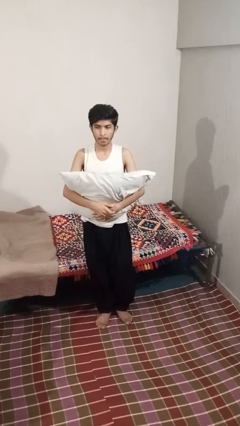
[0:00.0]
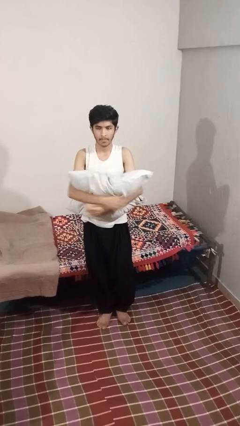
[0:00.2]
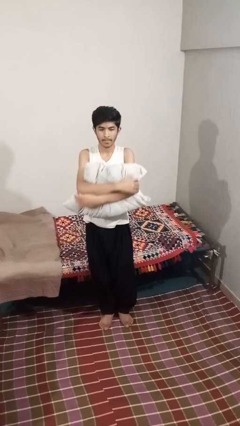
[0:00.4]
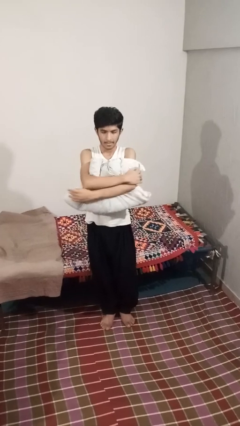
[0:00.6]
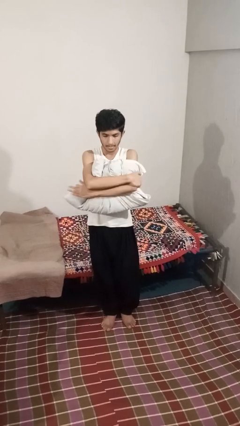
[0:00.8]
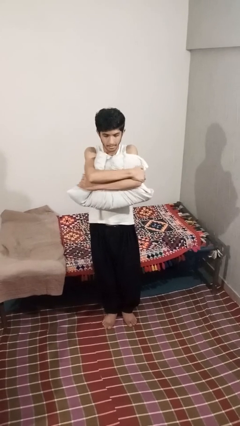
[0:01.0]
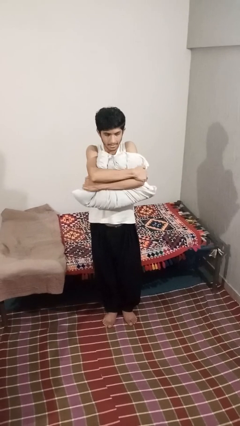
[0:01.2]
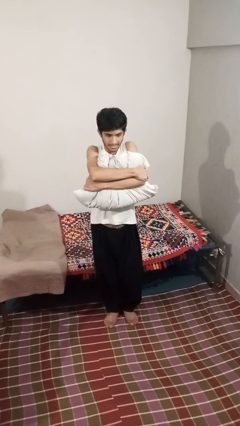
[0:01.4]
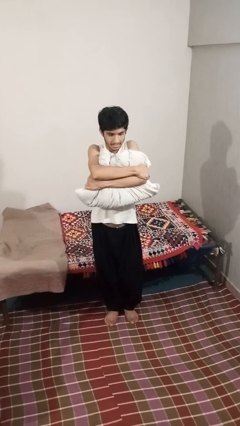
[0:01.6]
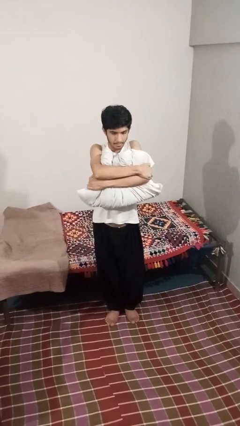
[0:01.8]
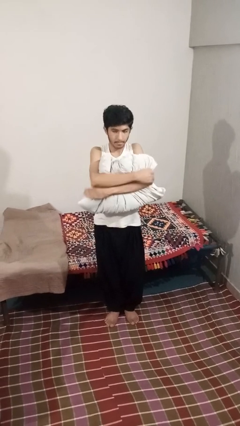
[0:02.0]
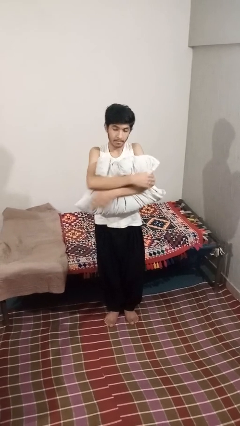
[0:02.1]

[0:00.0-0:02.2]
person squeezes object

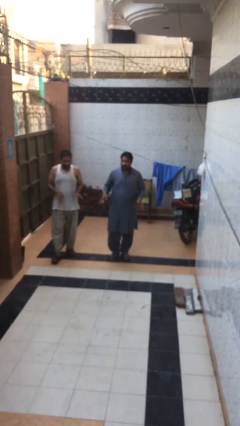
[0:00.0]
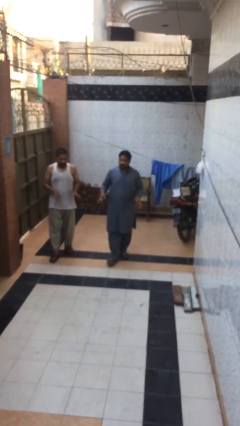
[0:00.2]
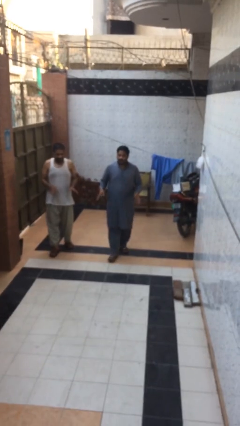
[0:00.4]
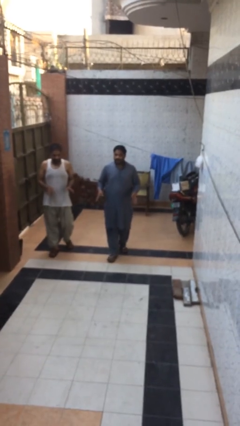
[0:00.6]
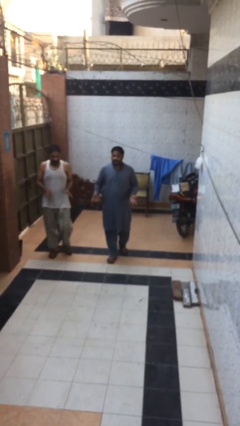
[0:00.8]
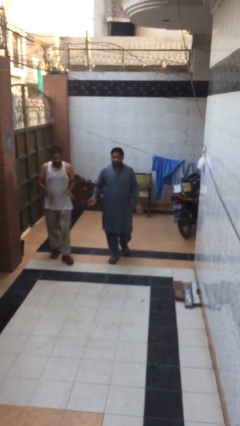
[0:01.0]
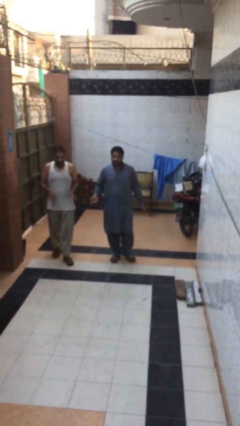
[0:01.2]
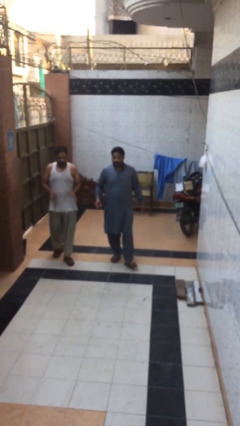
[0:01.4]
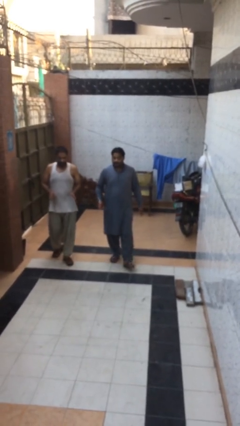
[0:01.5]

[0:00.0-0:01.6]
person shakes hand

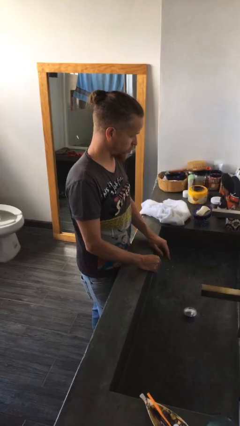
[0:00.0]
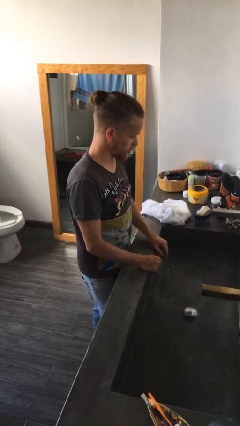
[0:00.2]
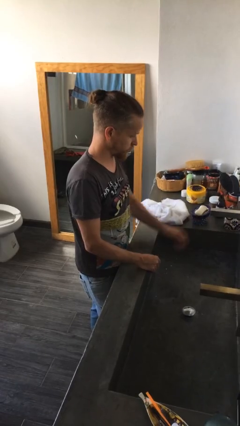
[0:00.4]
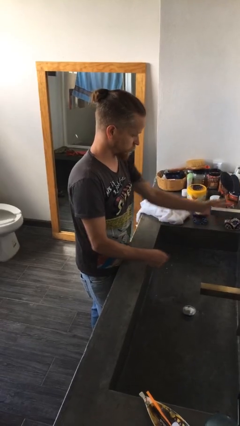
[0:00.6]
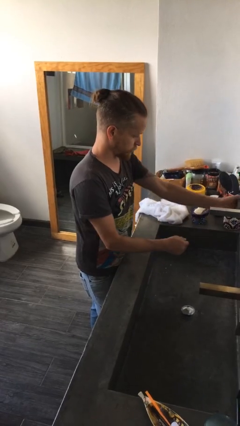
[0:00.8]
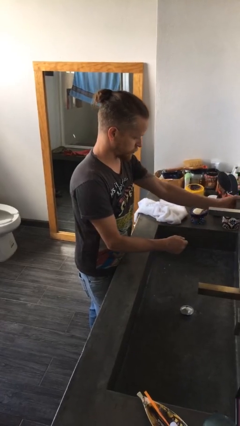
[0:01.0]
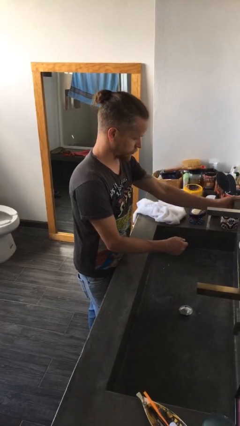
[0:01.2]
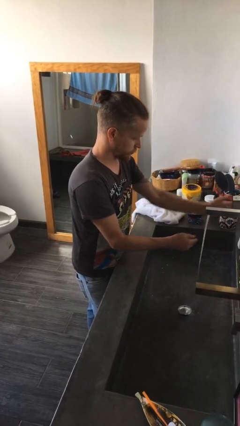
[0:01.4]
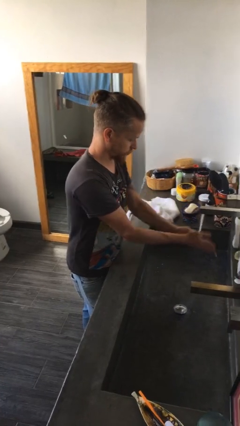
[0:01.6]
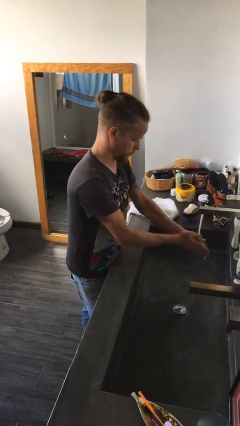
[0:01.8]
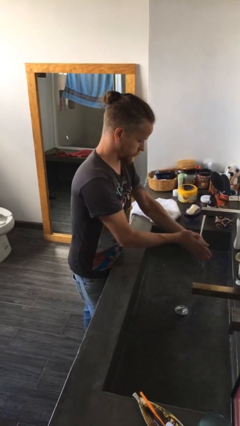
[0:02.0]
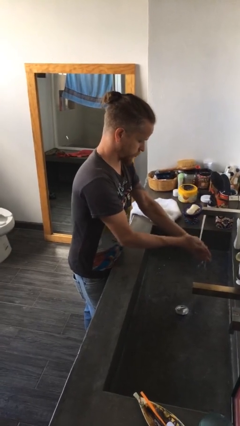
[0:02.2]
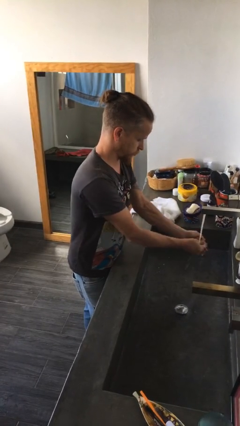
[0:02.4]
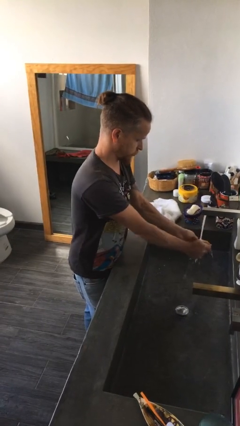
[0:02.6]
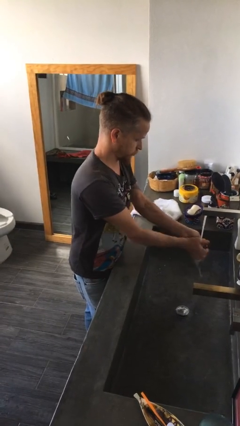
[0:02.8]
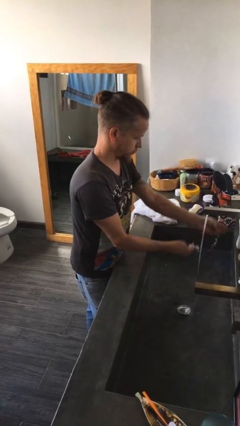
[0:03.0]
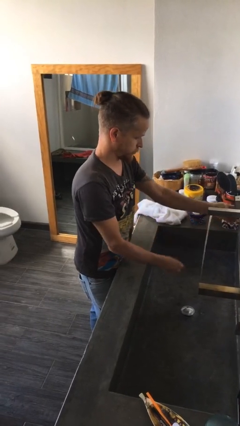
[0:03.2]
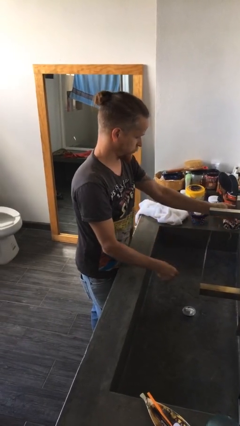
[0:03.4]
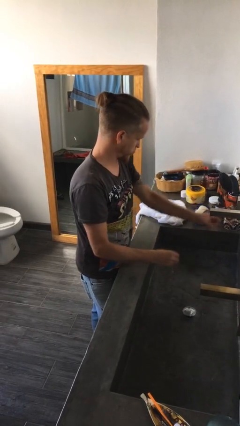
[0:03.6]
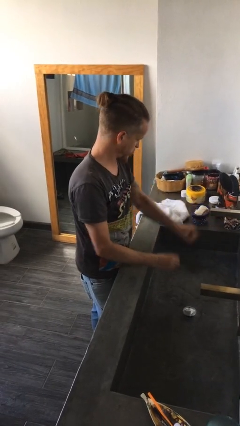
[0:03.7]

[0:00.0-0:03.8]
person washes hands

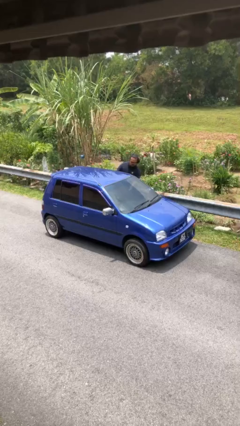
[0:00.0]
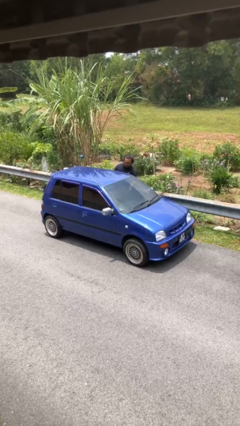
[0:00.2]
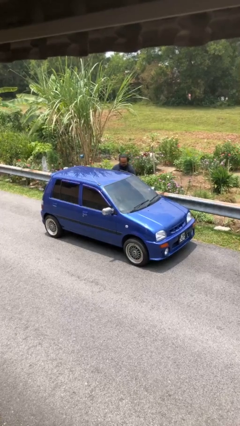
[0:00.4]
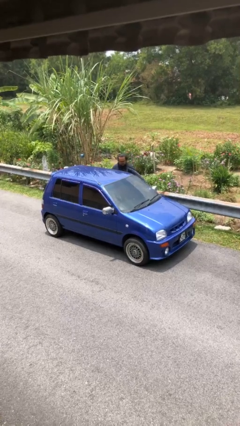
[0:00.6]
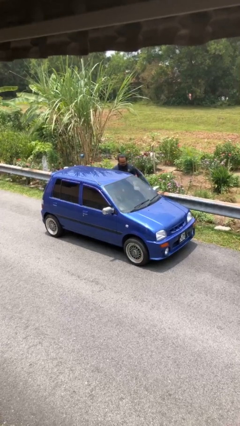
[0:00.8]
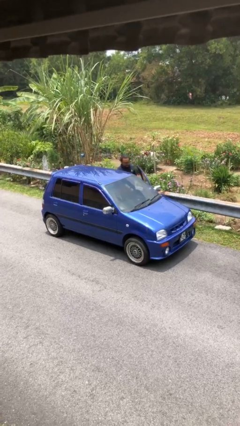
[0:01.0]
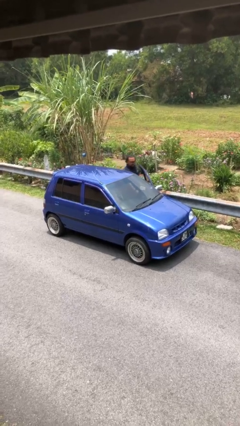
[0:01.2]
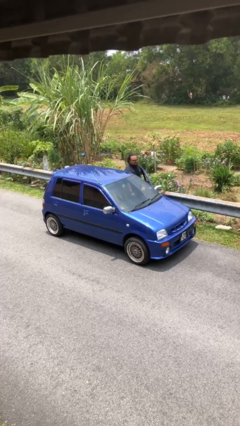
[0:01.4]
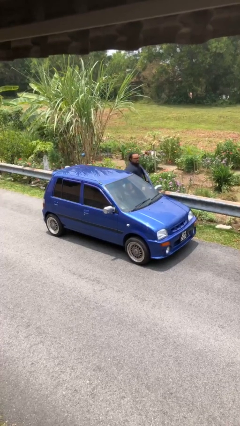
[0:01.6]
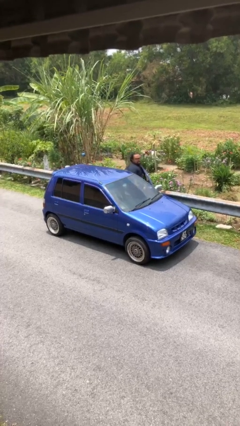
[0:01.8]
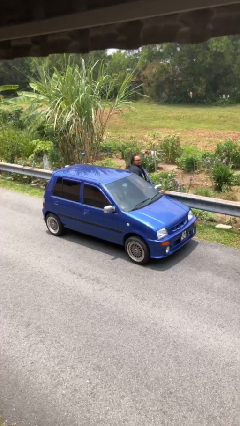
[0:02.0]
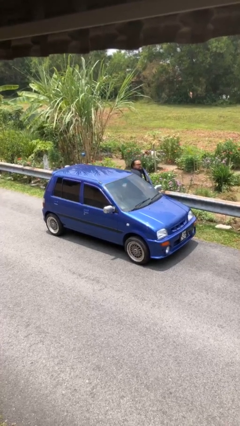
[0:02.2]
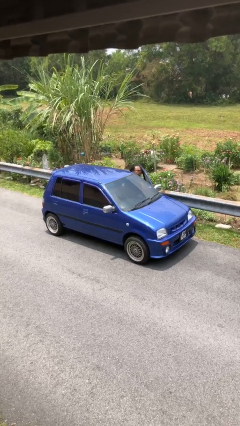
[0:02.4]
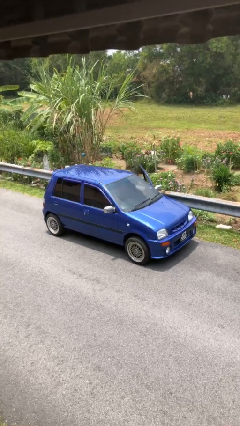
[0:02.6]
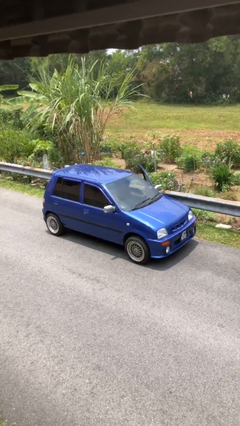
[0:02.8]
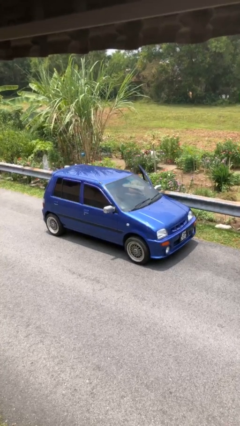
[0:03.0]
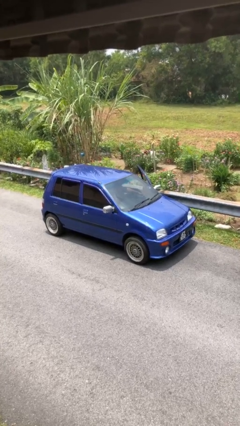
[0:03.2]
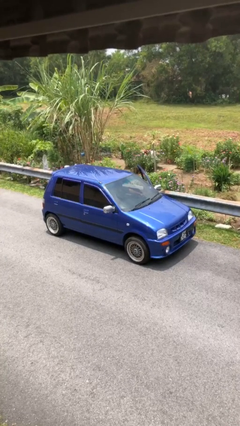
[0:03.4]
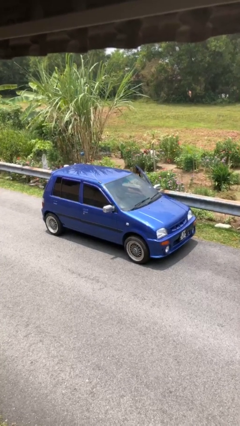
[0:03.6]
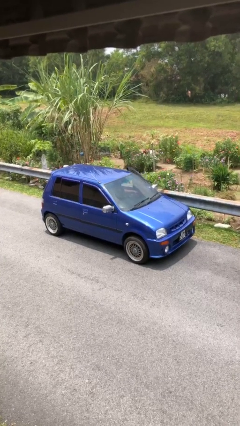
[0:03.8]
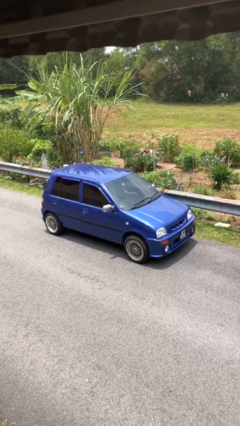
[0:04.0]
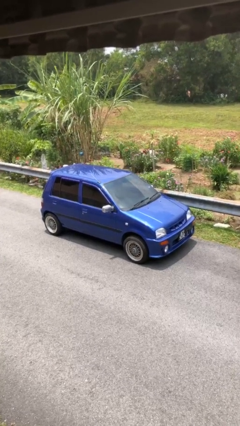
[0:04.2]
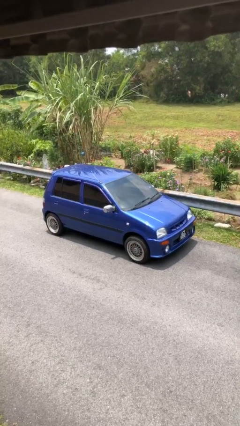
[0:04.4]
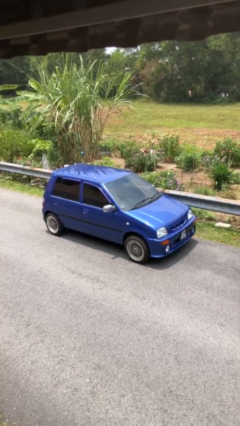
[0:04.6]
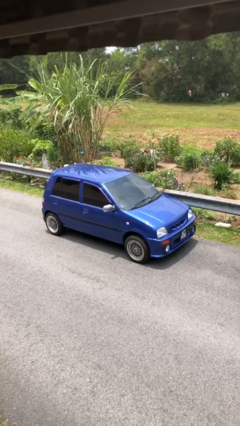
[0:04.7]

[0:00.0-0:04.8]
car picks up person

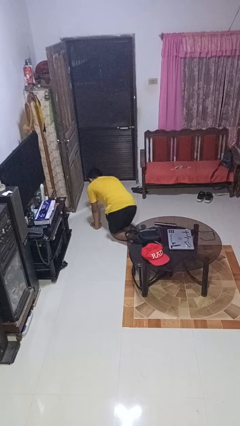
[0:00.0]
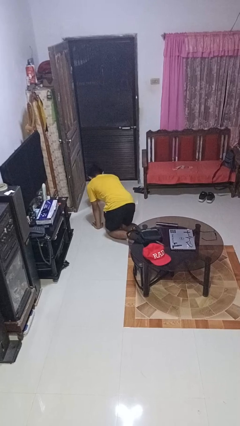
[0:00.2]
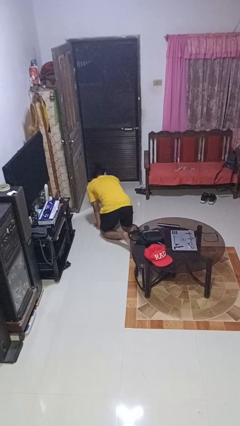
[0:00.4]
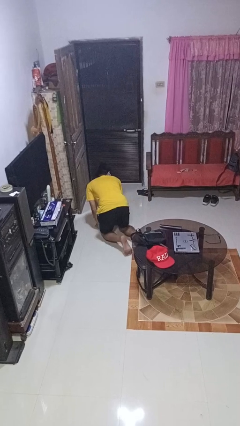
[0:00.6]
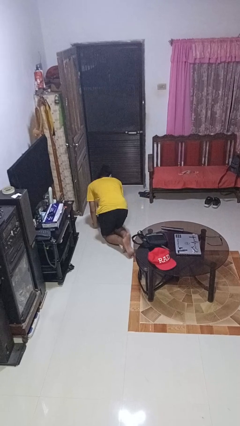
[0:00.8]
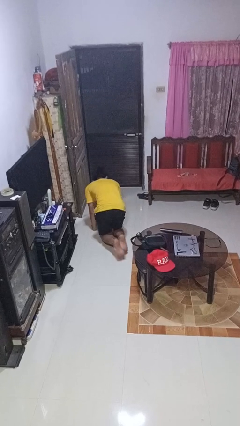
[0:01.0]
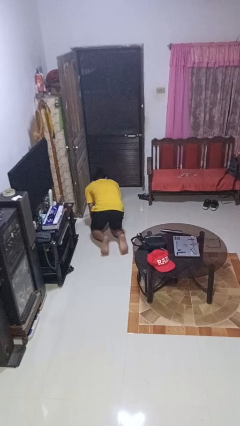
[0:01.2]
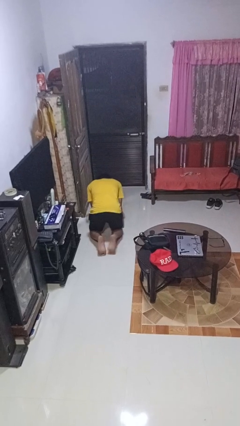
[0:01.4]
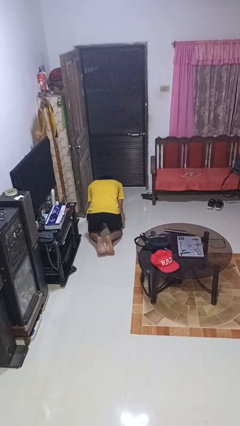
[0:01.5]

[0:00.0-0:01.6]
person crawls

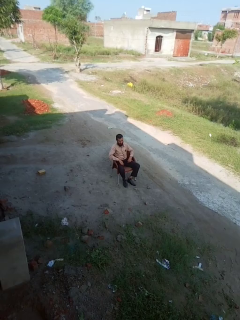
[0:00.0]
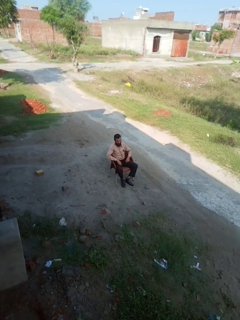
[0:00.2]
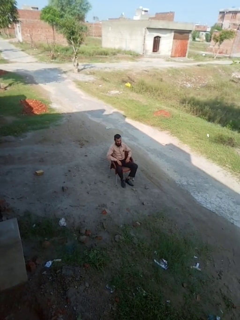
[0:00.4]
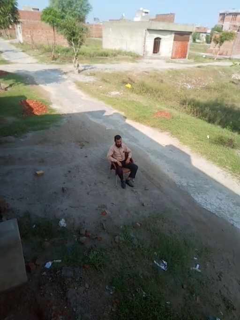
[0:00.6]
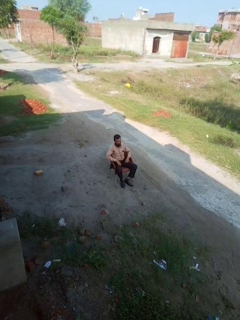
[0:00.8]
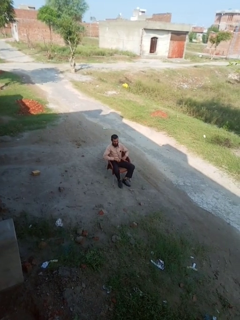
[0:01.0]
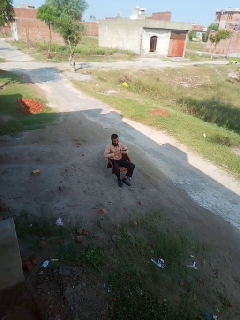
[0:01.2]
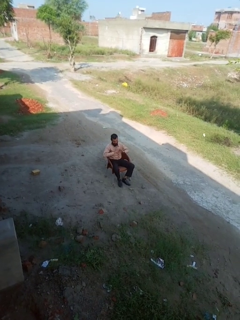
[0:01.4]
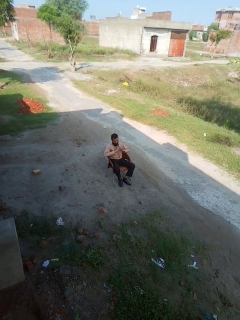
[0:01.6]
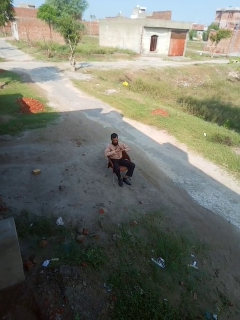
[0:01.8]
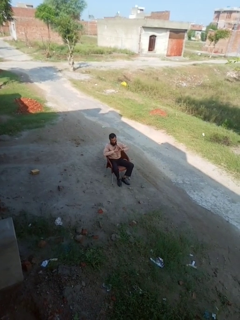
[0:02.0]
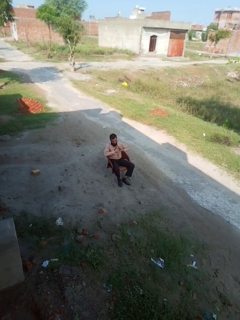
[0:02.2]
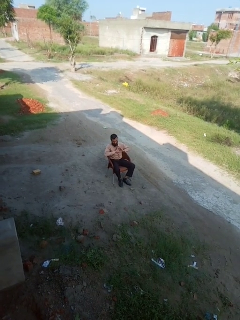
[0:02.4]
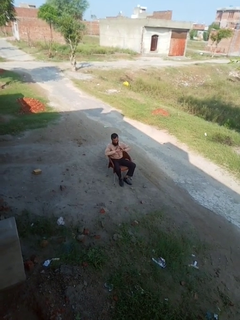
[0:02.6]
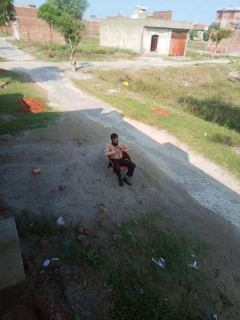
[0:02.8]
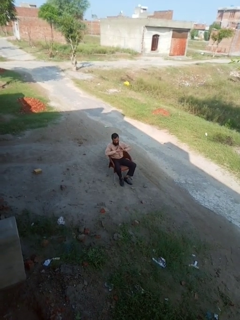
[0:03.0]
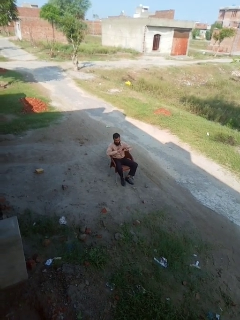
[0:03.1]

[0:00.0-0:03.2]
person gestures heart

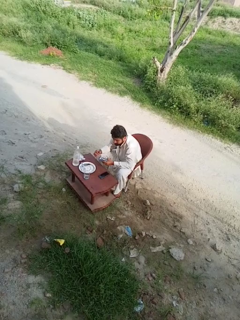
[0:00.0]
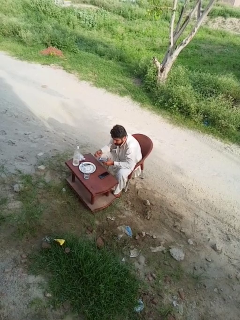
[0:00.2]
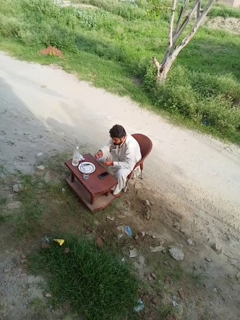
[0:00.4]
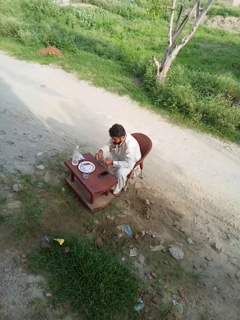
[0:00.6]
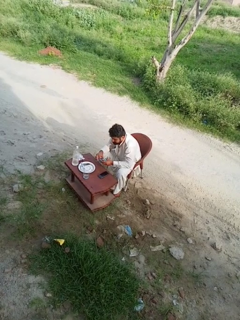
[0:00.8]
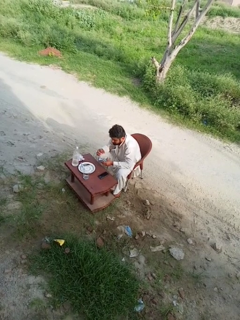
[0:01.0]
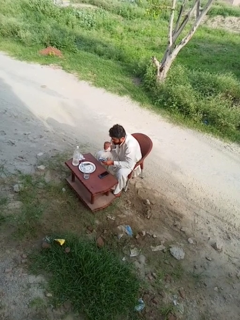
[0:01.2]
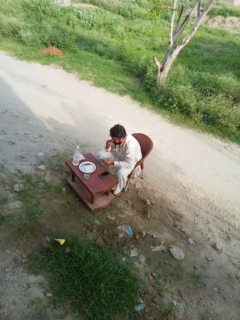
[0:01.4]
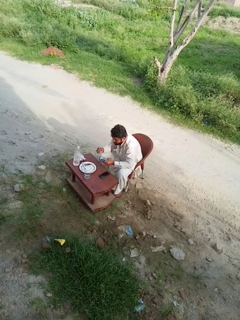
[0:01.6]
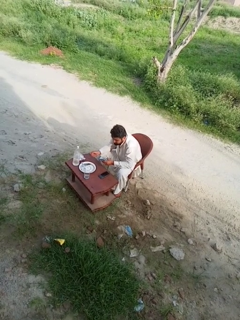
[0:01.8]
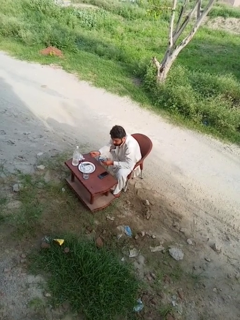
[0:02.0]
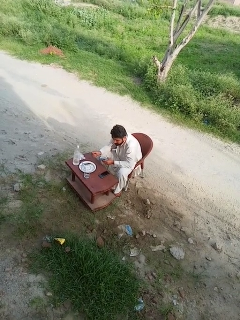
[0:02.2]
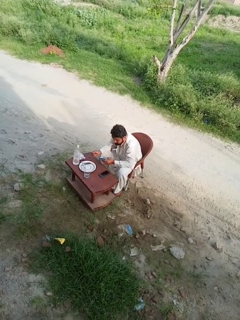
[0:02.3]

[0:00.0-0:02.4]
person eats with hands
